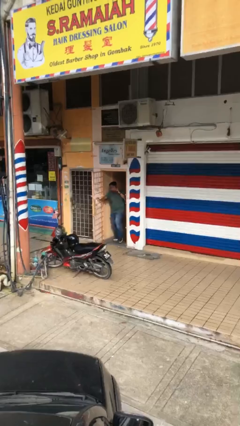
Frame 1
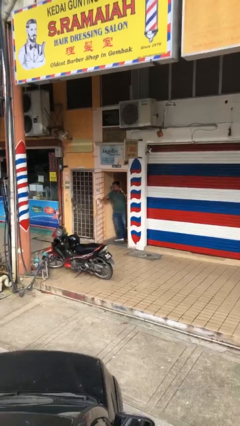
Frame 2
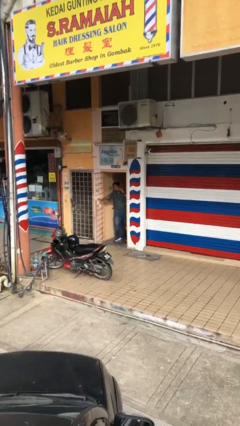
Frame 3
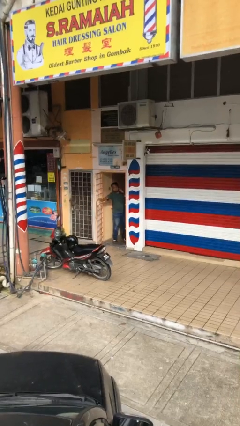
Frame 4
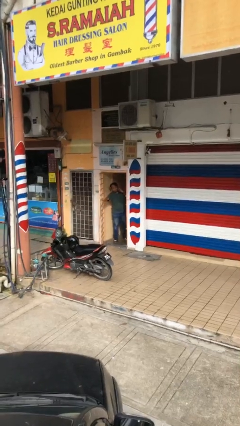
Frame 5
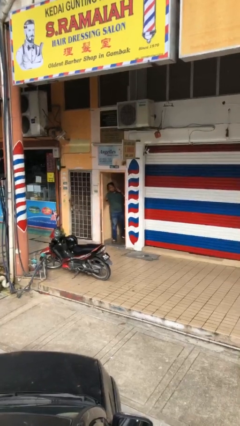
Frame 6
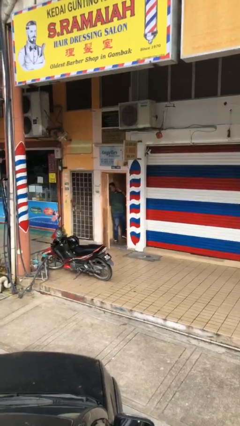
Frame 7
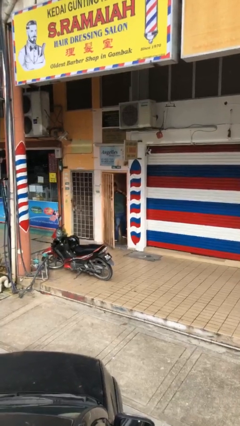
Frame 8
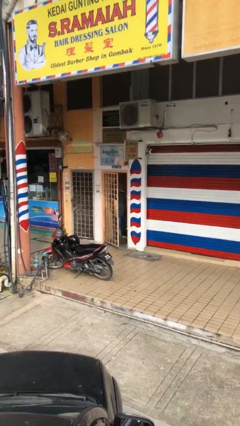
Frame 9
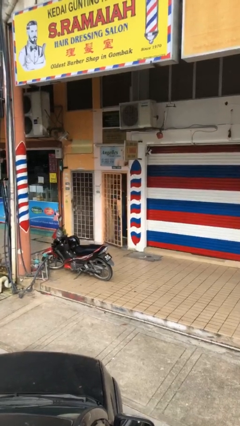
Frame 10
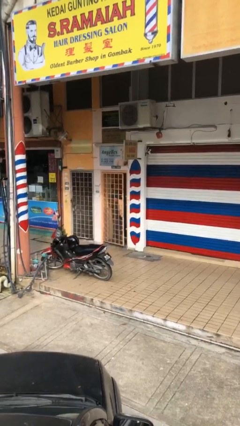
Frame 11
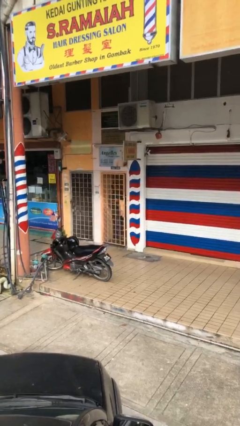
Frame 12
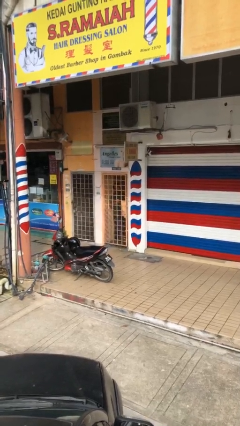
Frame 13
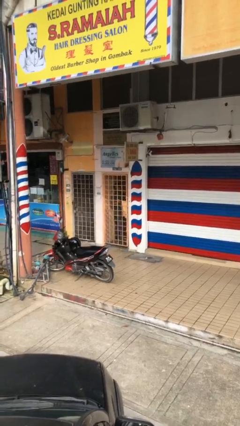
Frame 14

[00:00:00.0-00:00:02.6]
person closes facility door

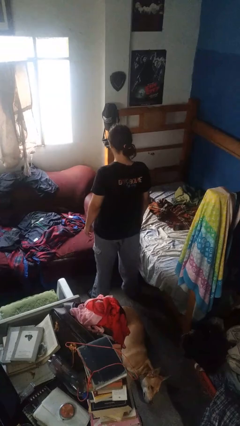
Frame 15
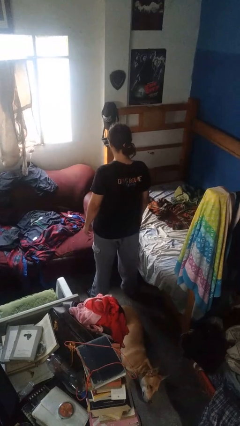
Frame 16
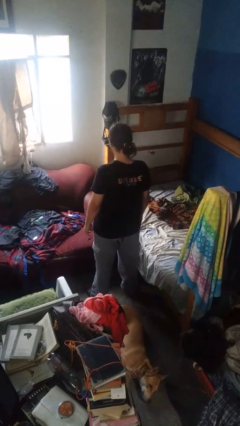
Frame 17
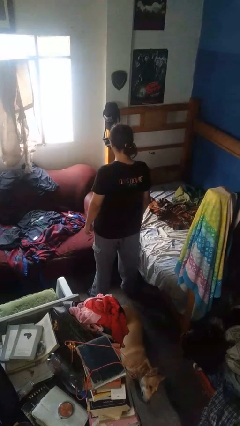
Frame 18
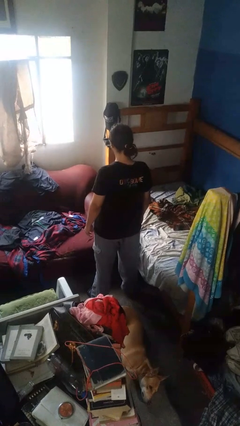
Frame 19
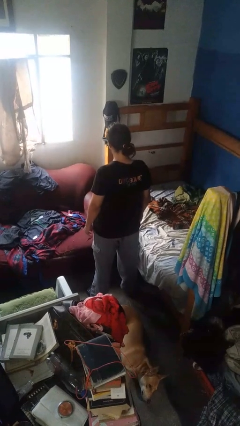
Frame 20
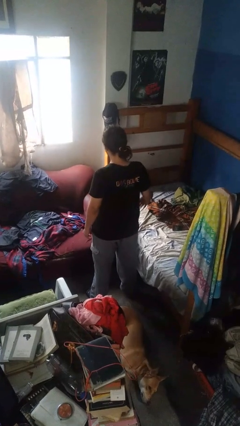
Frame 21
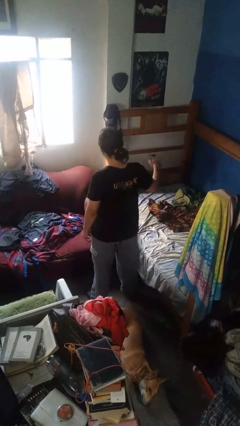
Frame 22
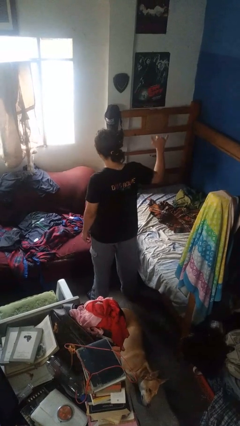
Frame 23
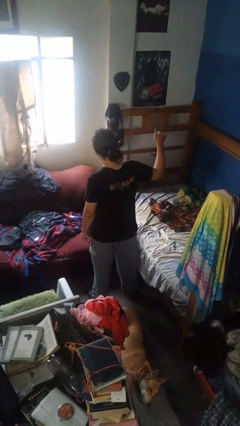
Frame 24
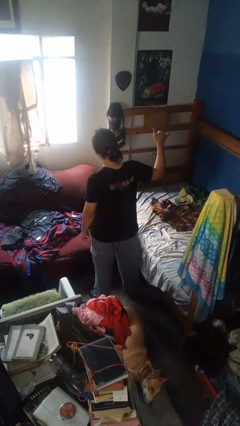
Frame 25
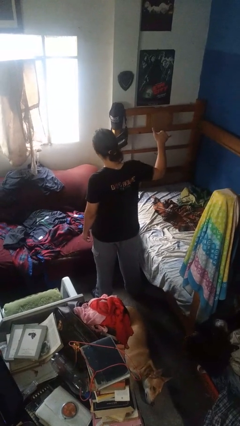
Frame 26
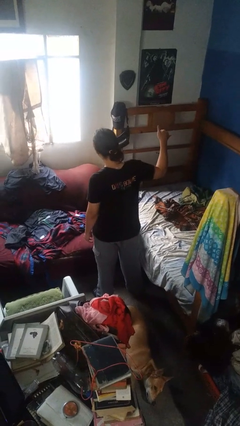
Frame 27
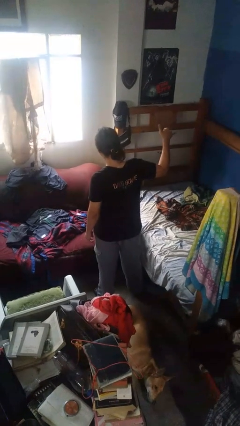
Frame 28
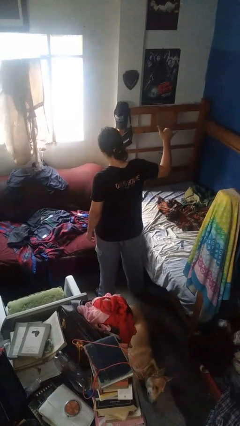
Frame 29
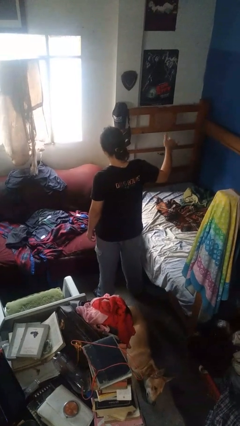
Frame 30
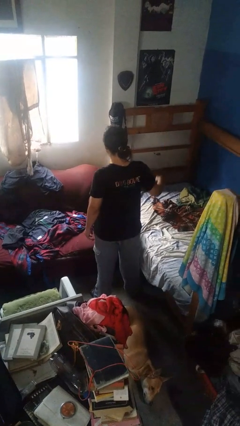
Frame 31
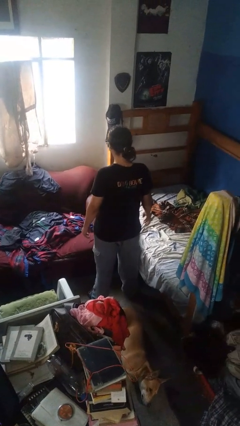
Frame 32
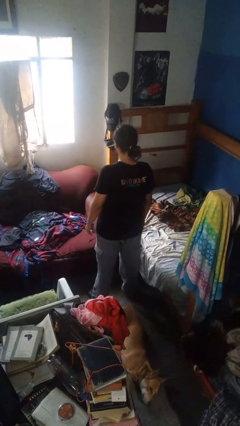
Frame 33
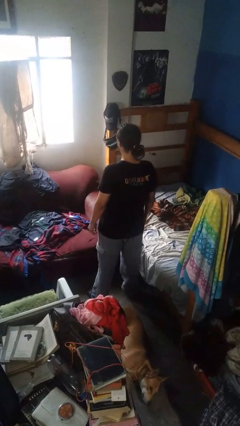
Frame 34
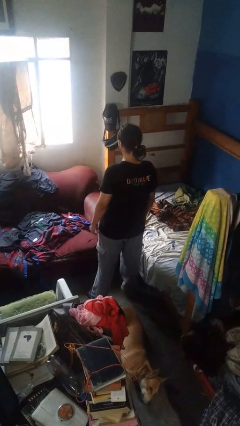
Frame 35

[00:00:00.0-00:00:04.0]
person gestures hang loose

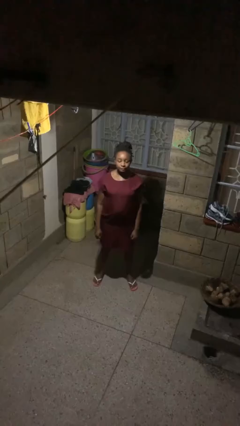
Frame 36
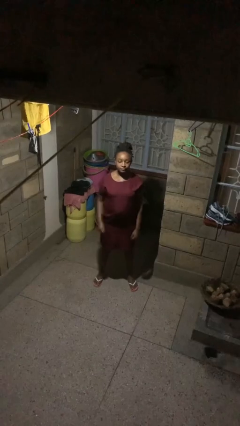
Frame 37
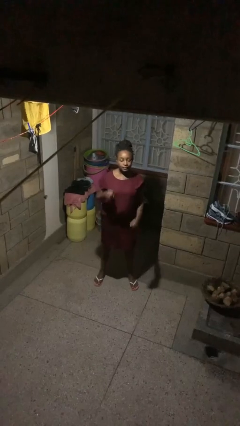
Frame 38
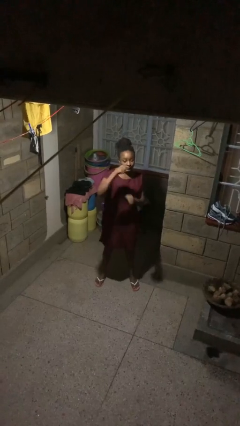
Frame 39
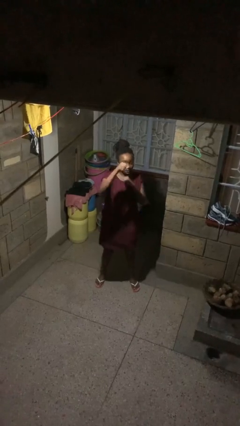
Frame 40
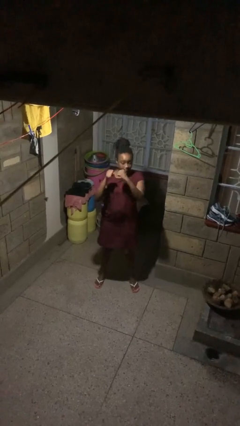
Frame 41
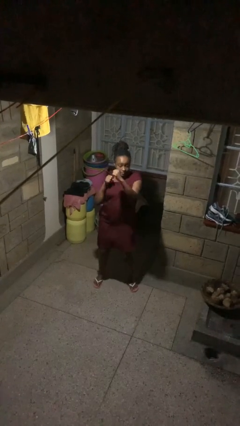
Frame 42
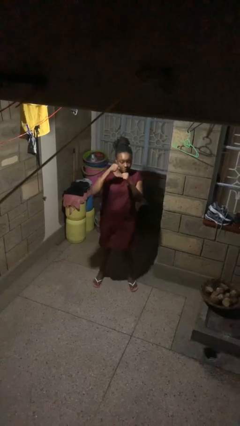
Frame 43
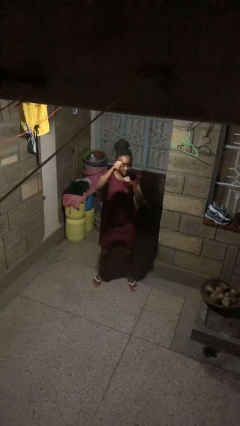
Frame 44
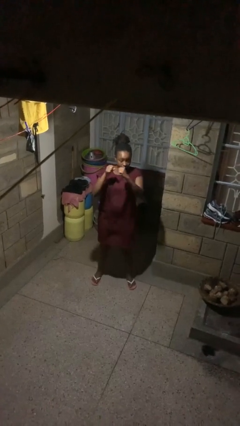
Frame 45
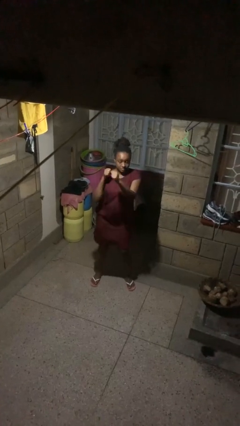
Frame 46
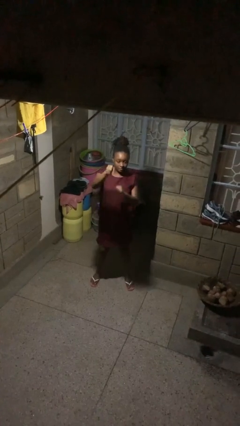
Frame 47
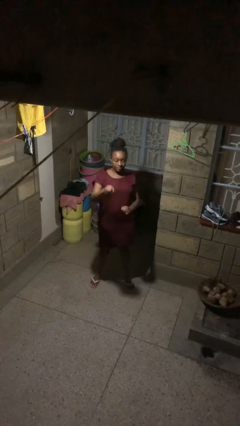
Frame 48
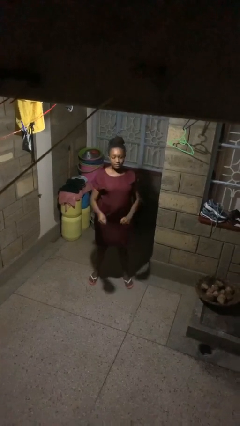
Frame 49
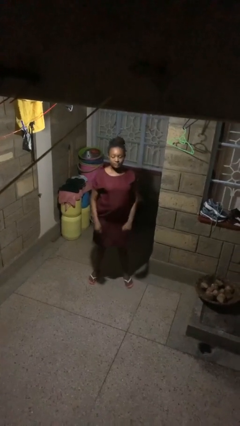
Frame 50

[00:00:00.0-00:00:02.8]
person punches

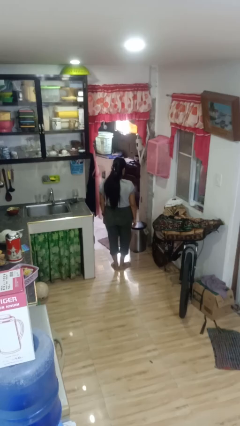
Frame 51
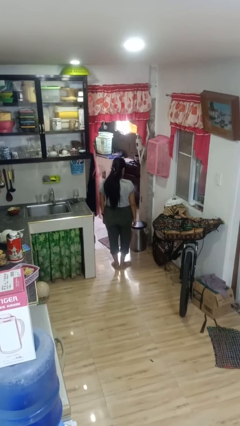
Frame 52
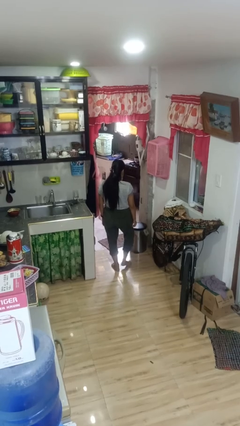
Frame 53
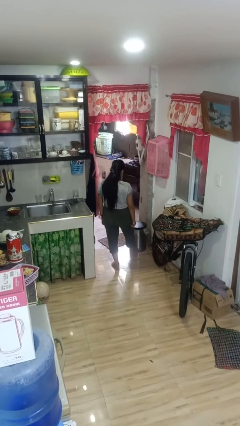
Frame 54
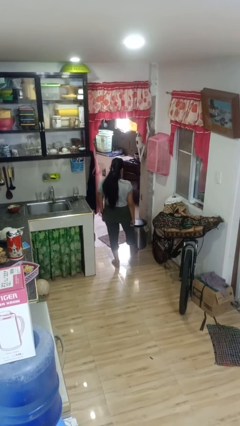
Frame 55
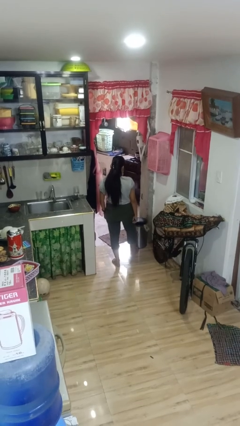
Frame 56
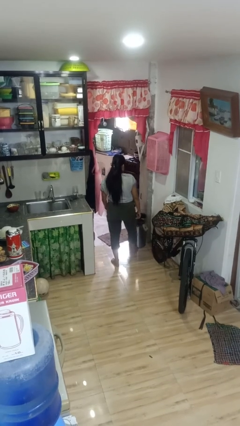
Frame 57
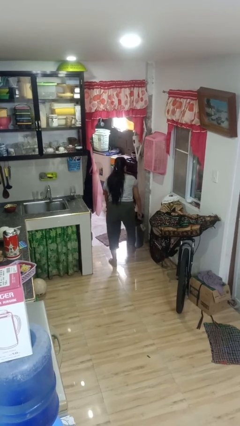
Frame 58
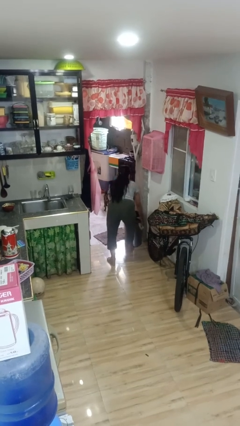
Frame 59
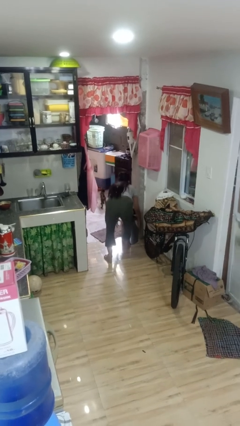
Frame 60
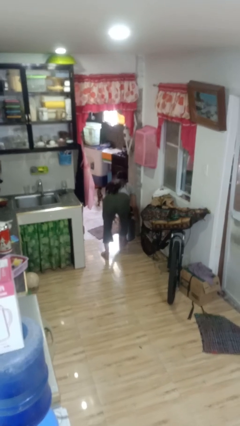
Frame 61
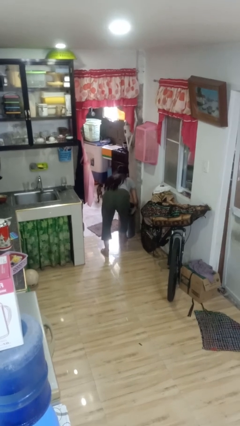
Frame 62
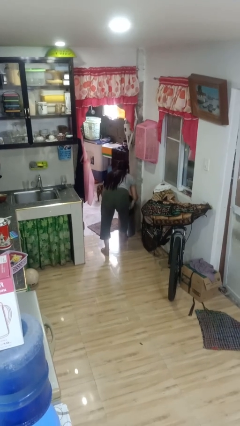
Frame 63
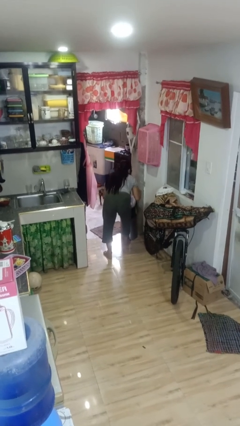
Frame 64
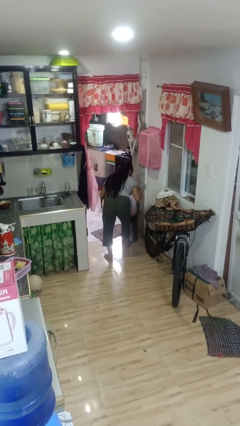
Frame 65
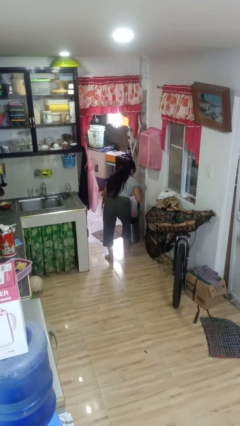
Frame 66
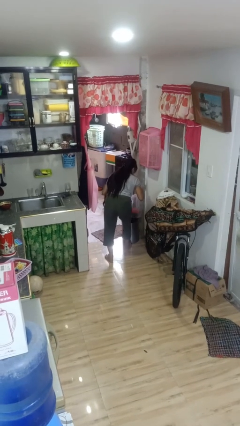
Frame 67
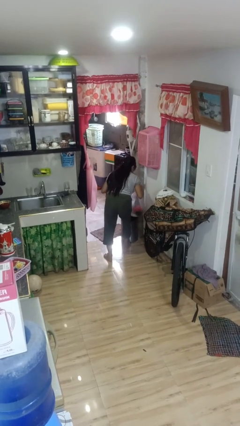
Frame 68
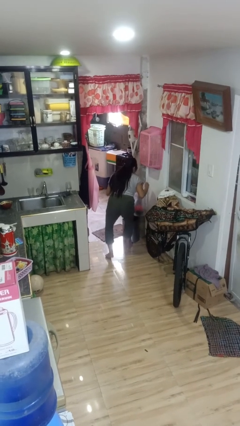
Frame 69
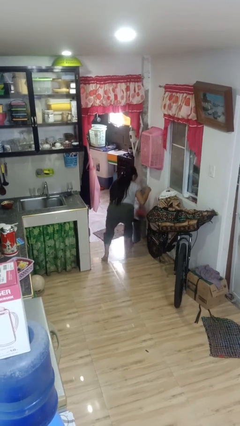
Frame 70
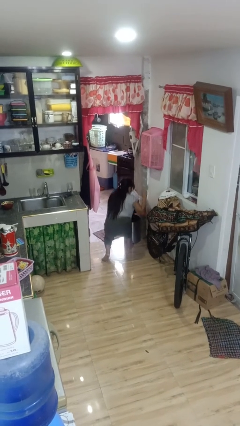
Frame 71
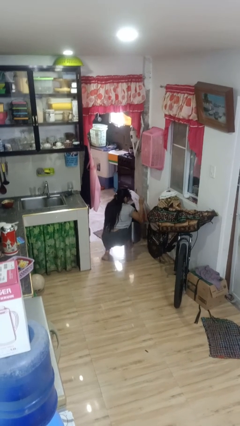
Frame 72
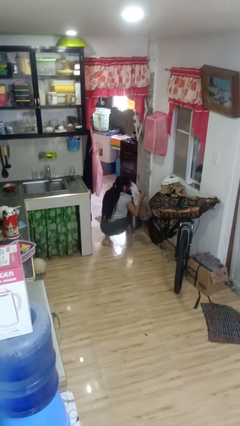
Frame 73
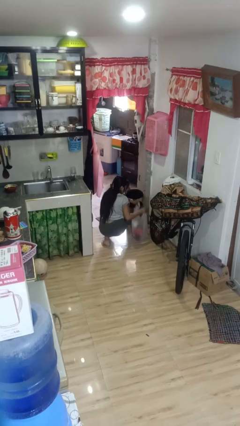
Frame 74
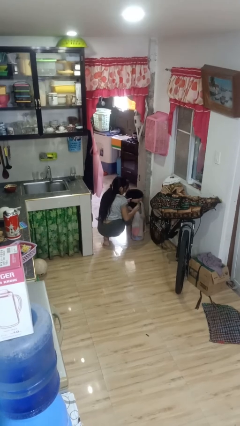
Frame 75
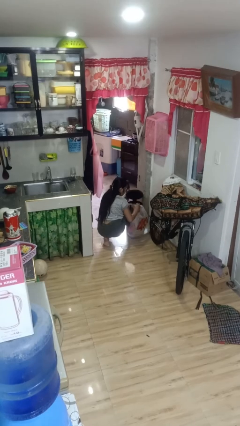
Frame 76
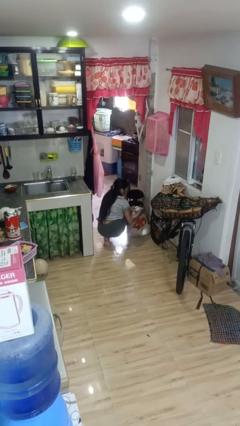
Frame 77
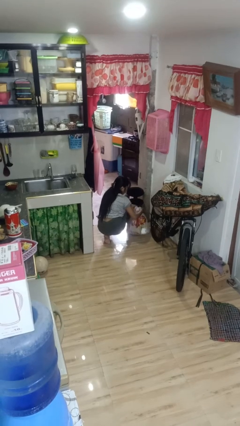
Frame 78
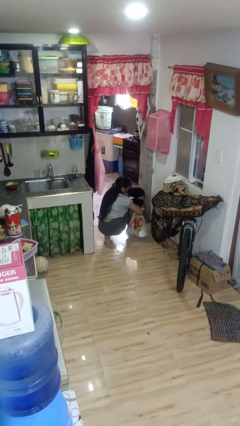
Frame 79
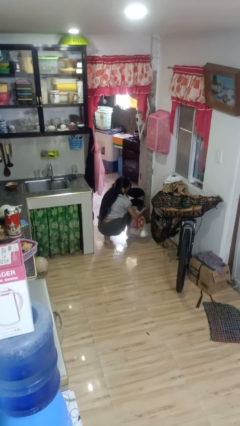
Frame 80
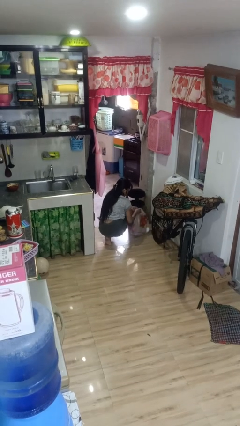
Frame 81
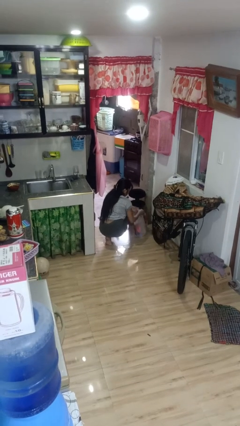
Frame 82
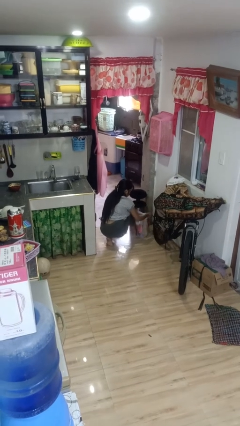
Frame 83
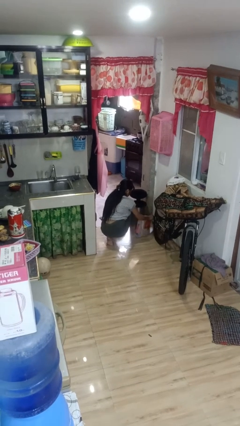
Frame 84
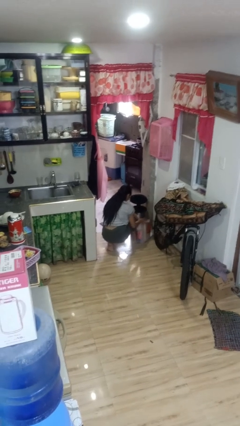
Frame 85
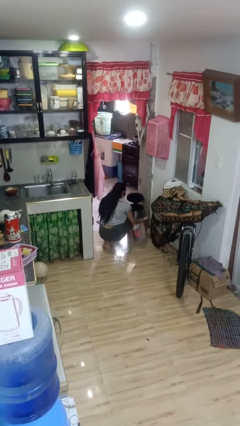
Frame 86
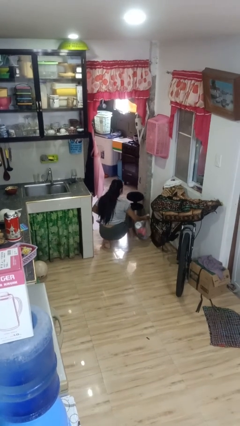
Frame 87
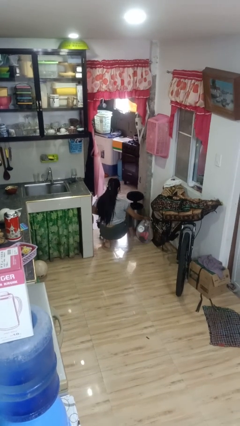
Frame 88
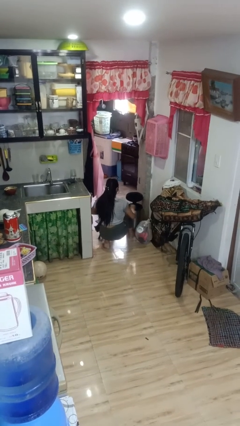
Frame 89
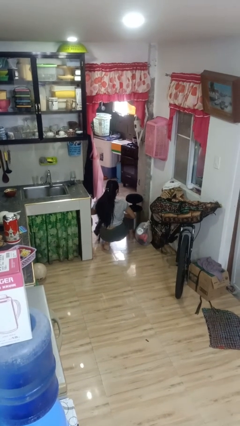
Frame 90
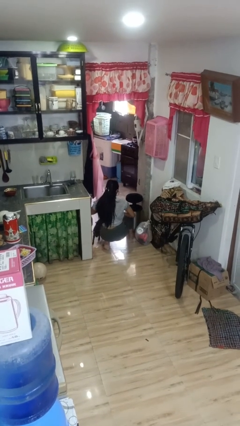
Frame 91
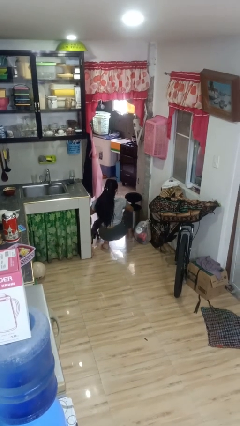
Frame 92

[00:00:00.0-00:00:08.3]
person removes trashbag from trashcan
